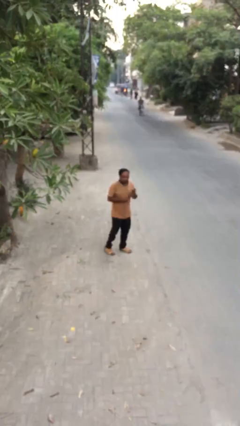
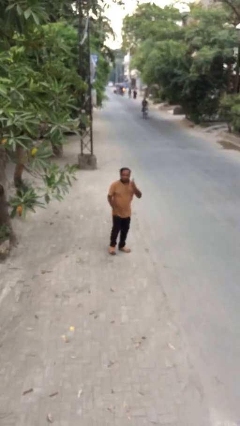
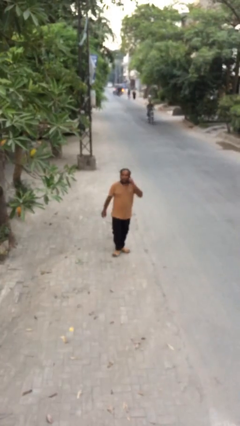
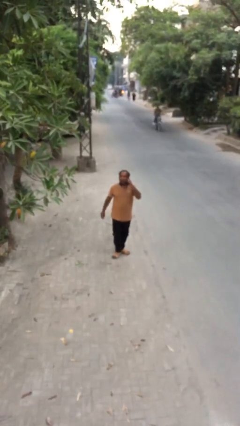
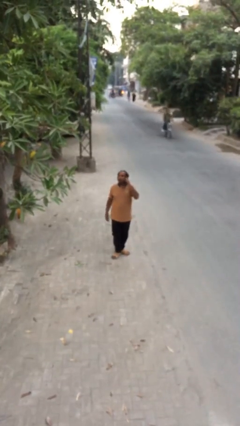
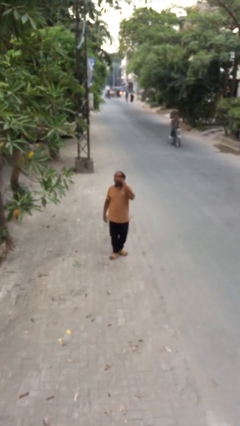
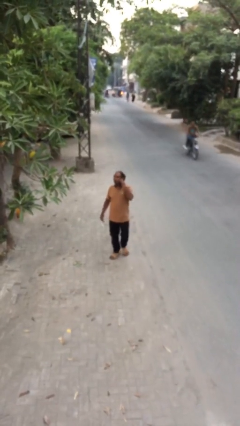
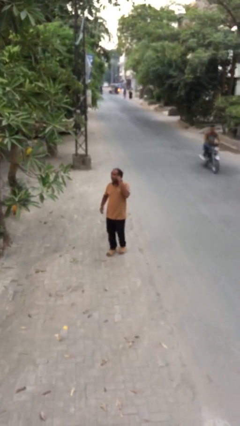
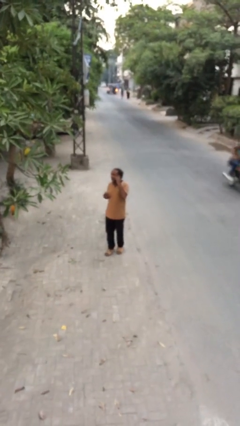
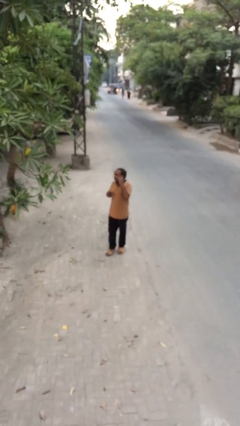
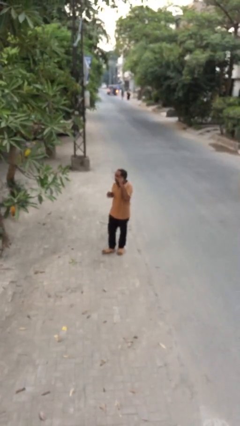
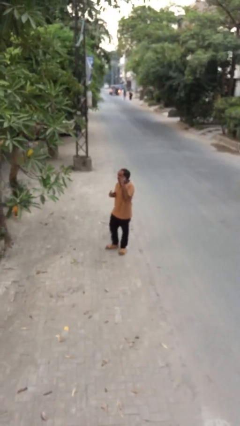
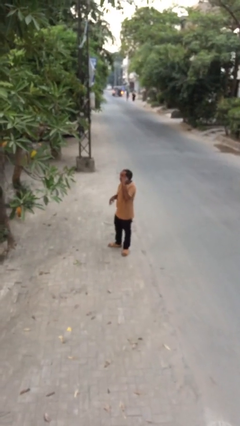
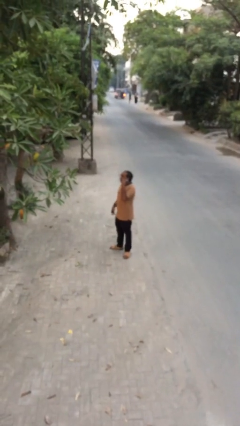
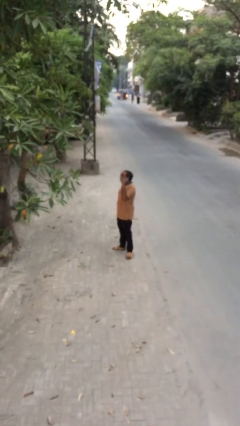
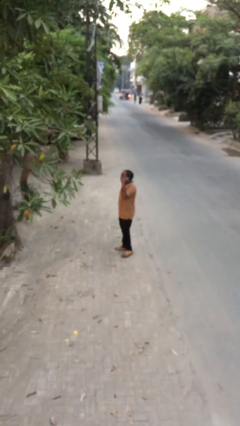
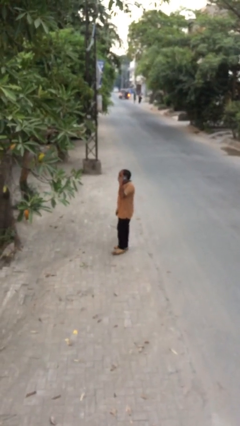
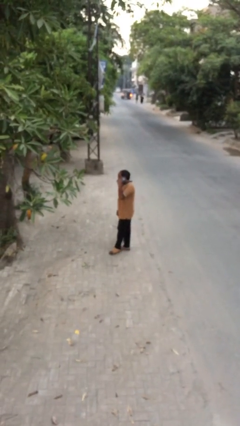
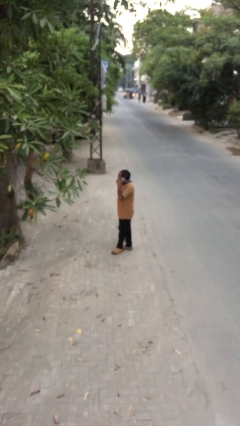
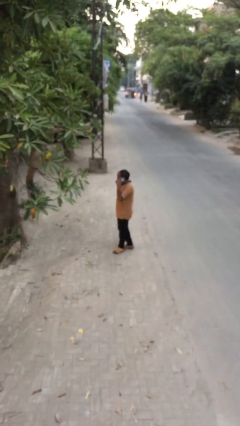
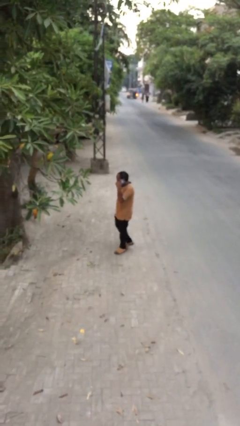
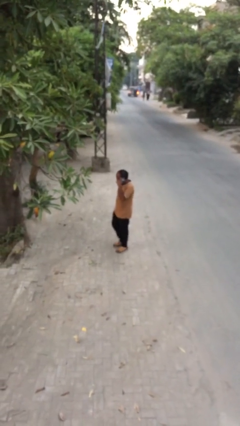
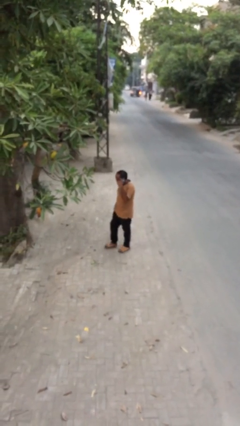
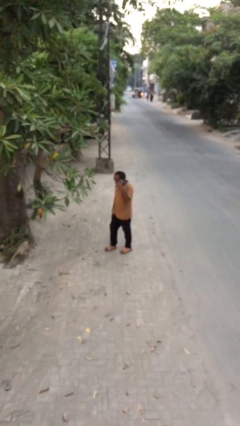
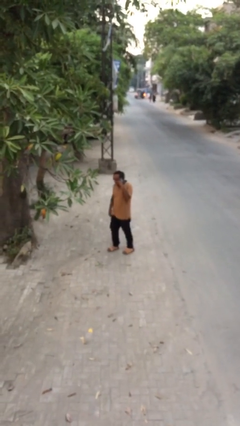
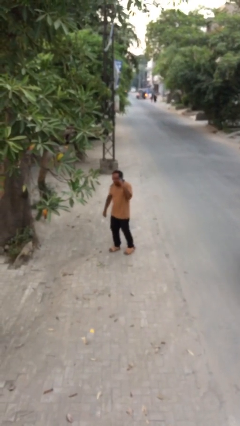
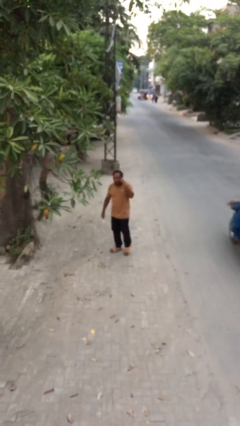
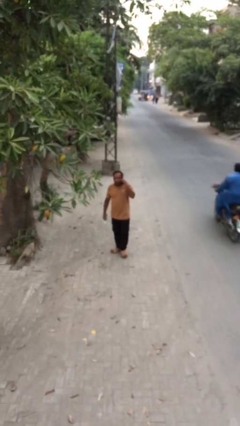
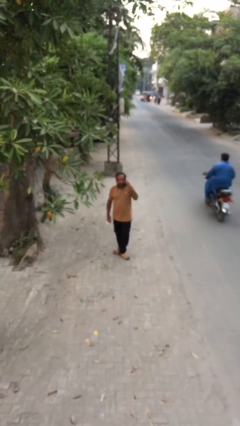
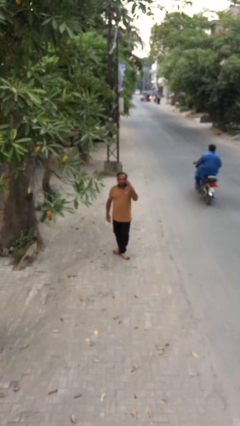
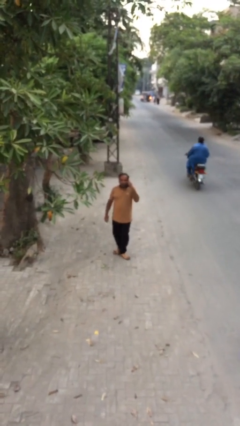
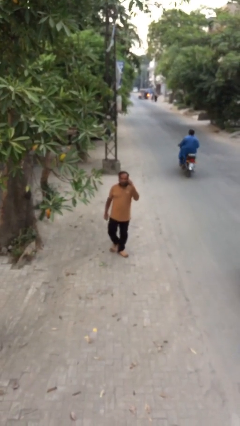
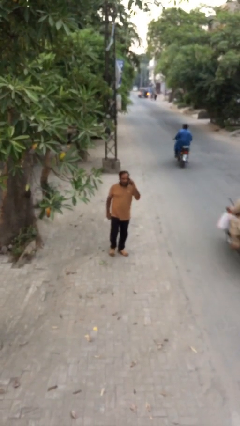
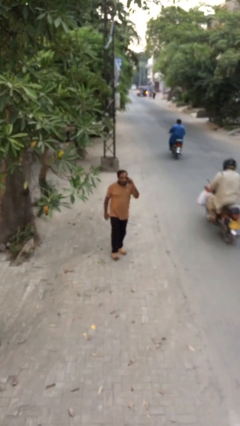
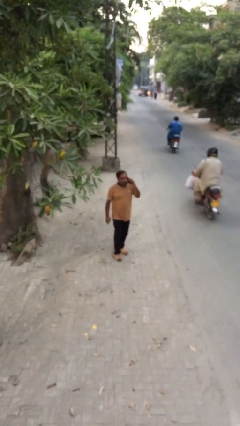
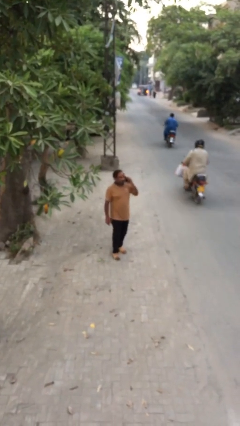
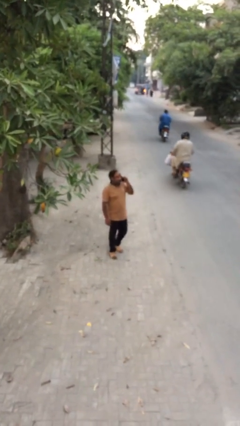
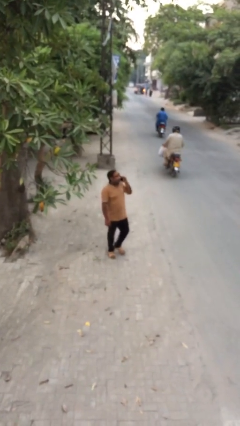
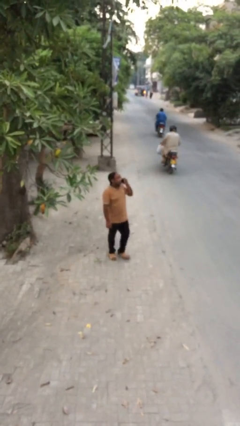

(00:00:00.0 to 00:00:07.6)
person talks on phone

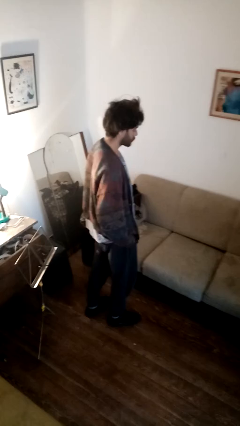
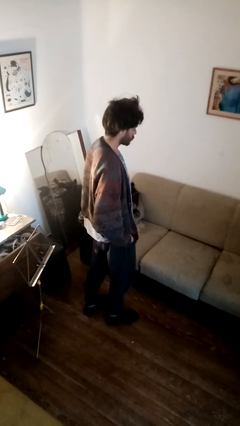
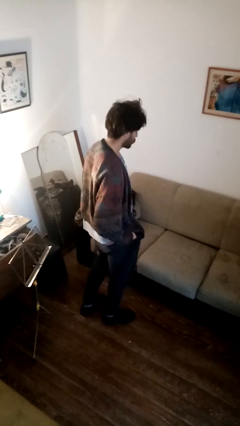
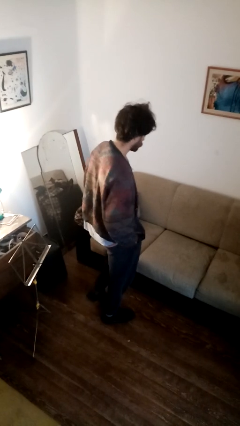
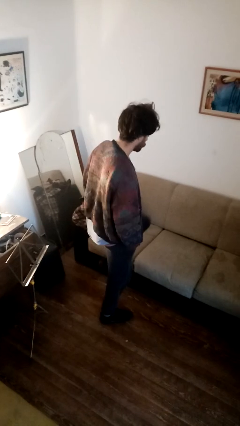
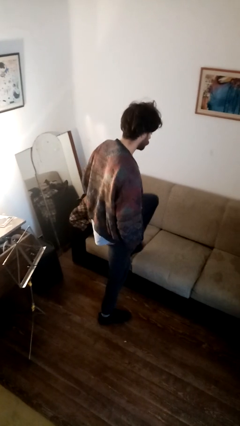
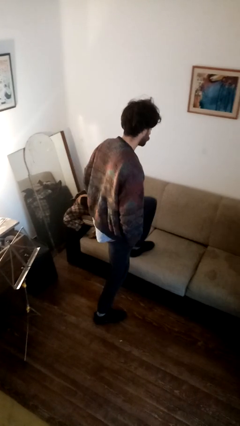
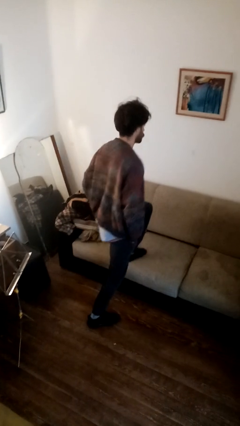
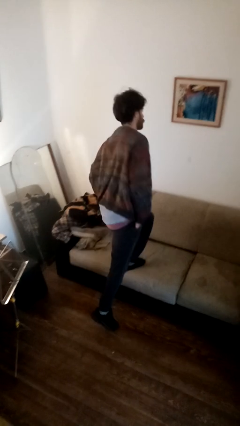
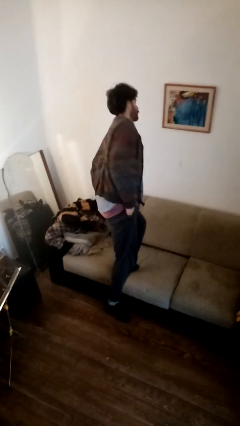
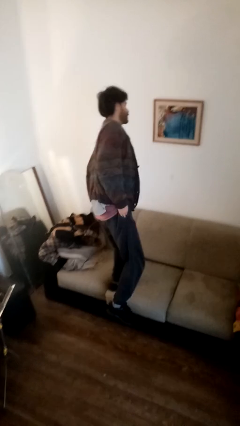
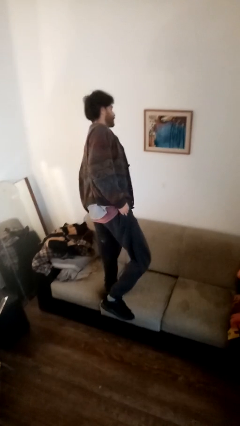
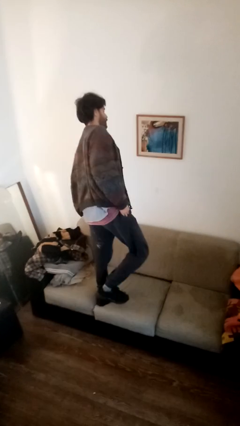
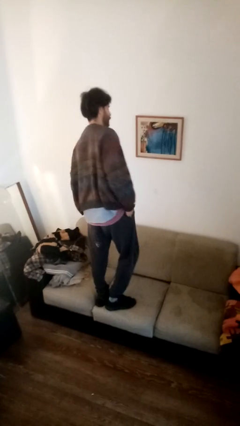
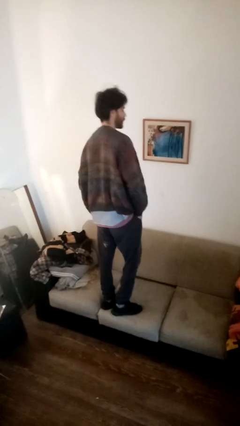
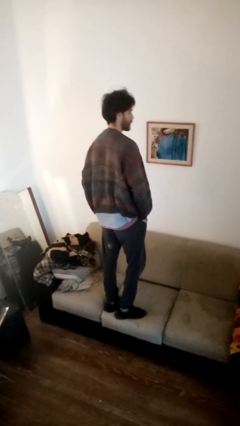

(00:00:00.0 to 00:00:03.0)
person climbs on couch

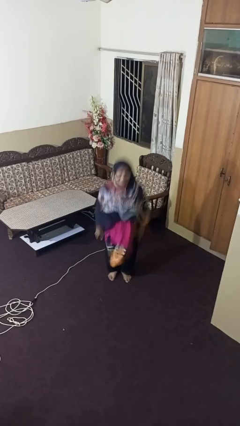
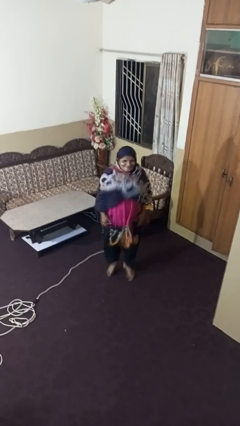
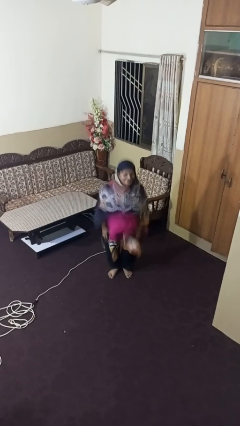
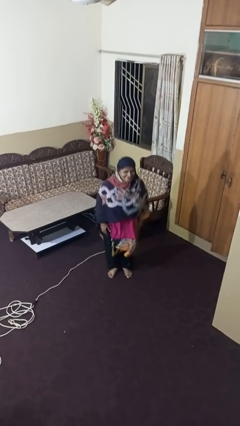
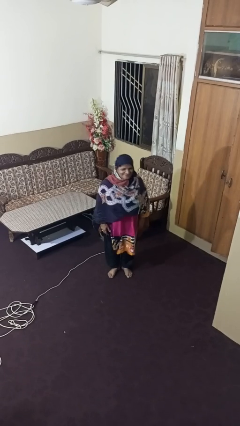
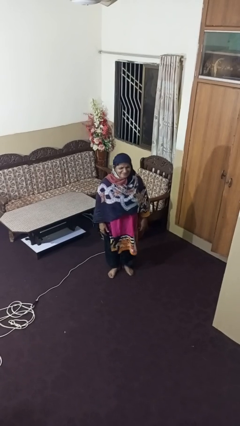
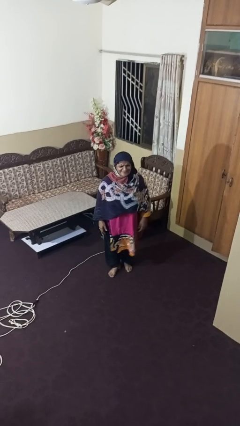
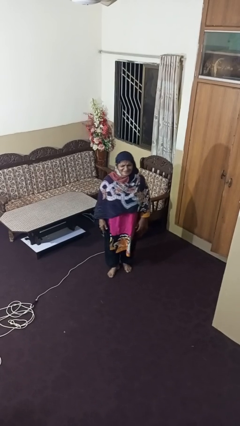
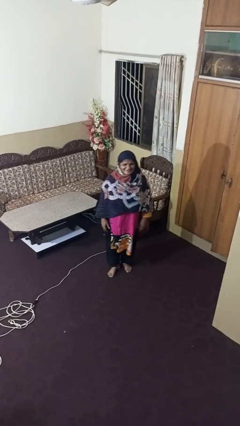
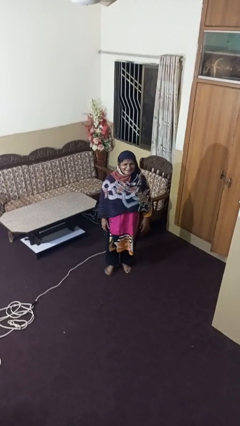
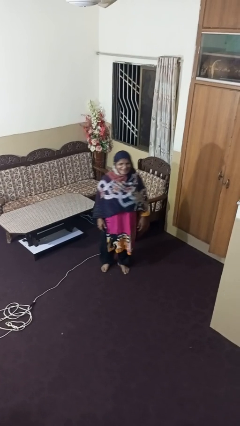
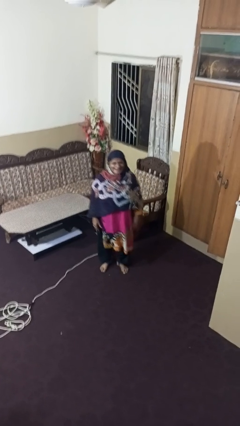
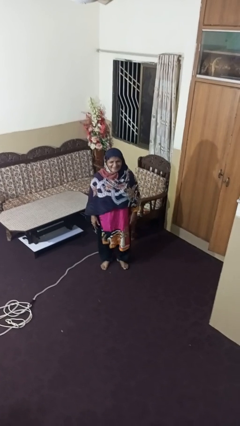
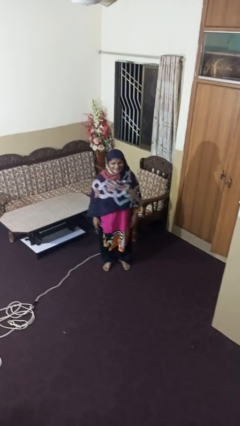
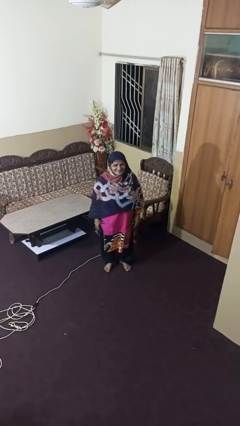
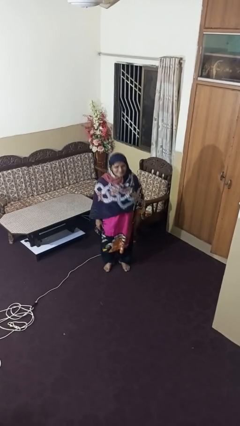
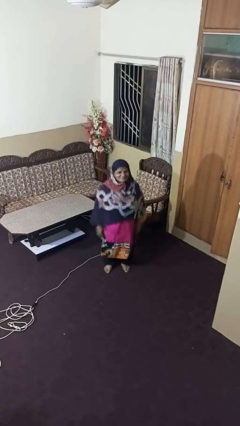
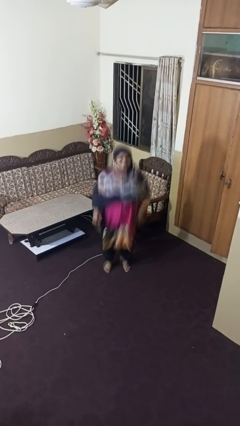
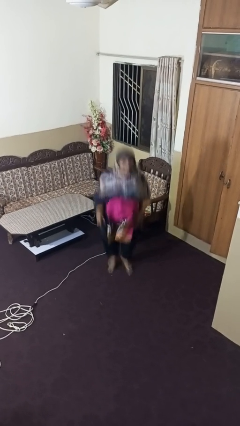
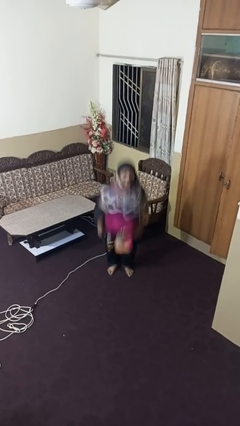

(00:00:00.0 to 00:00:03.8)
person jumps

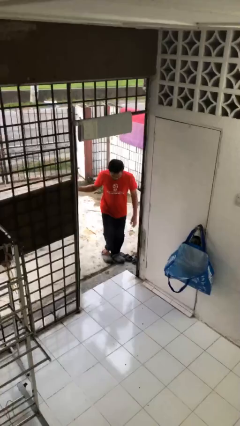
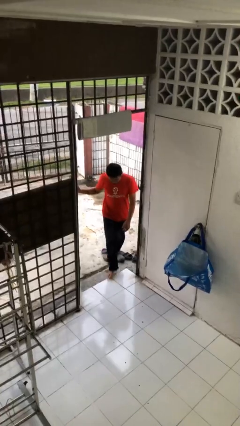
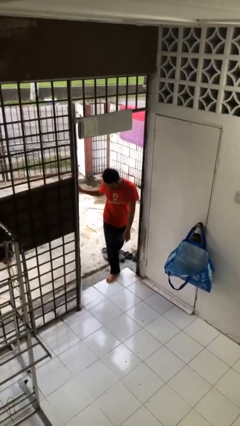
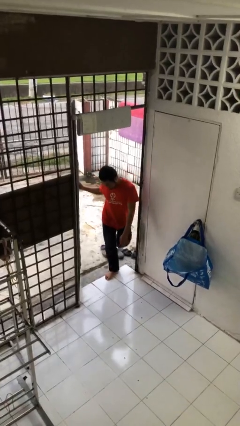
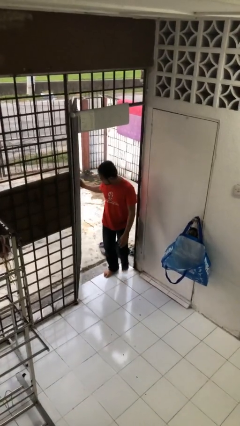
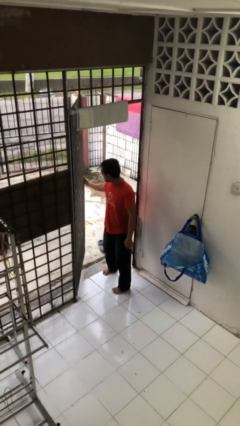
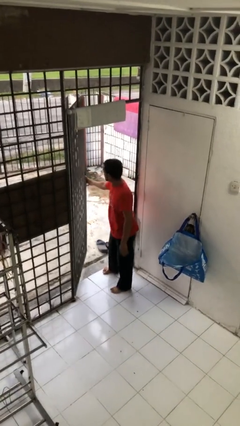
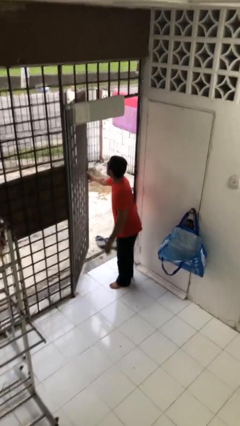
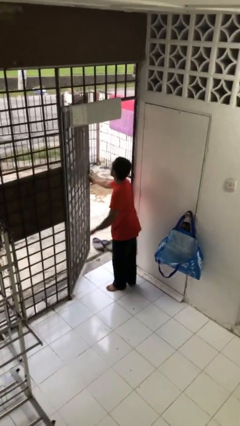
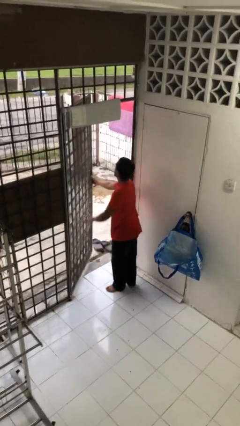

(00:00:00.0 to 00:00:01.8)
person enters scene through structure

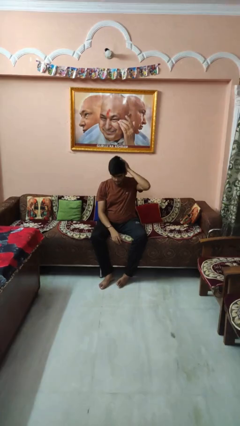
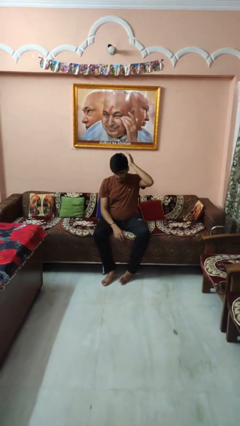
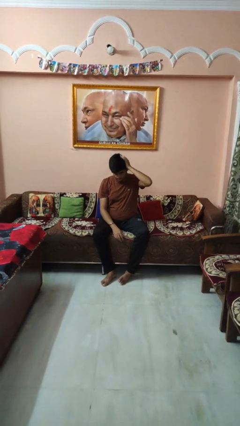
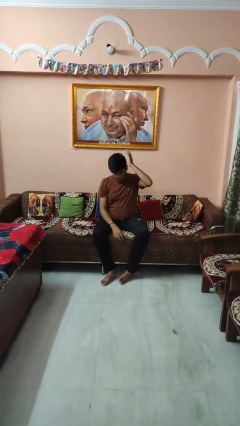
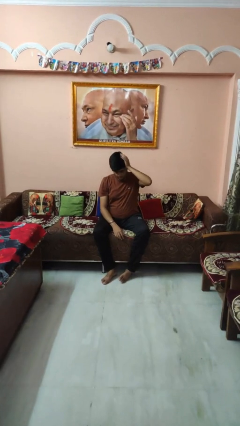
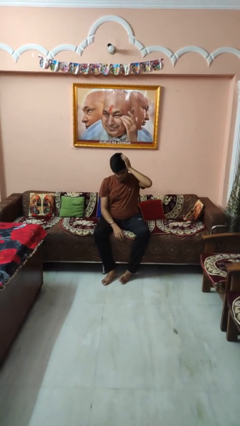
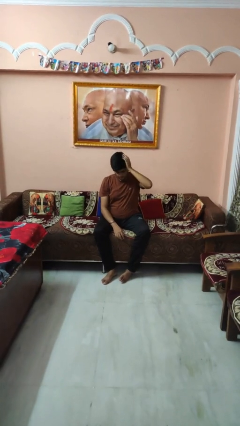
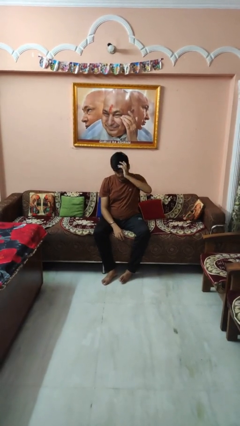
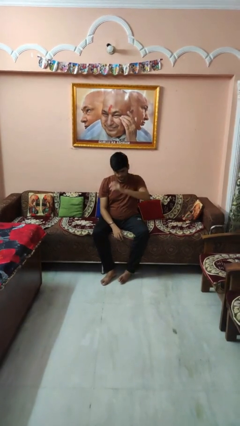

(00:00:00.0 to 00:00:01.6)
person pats head
